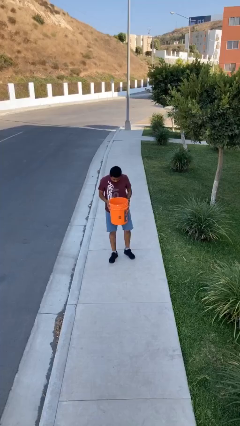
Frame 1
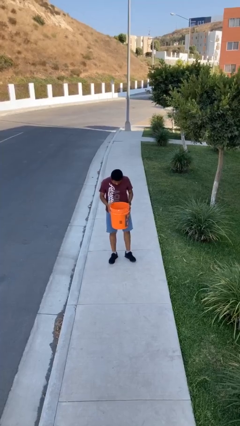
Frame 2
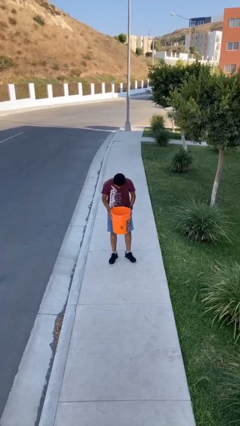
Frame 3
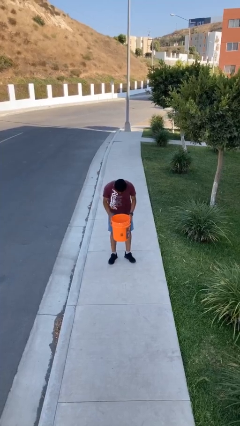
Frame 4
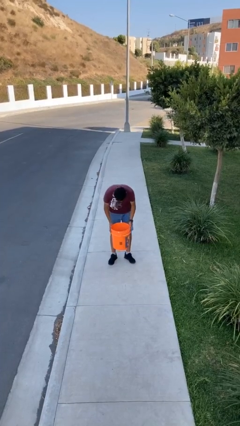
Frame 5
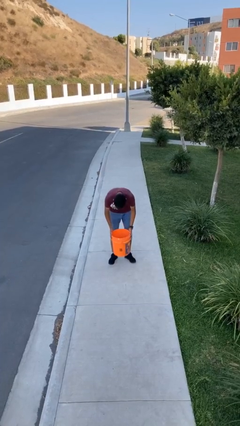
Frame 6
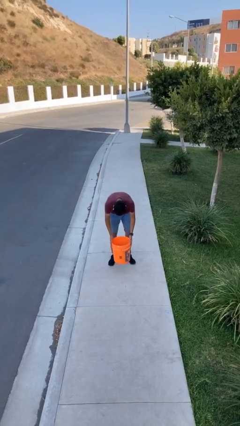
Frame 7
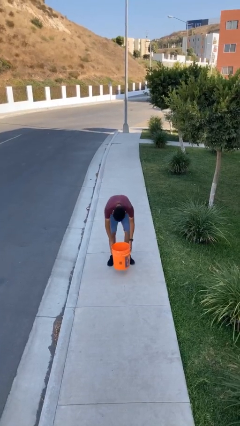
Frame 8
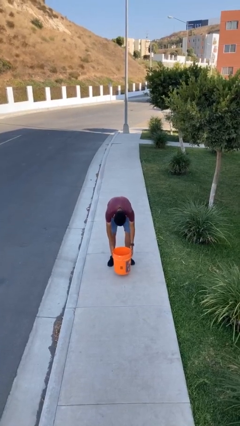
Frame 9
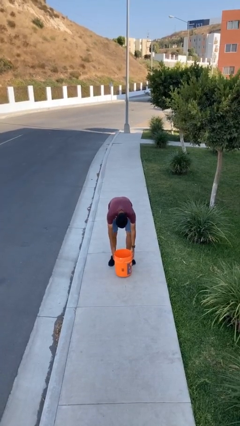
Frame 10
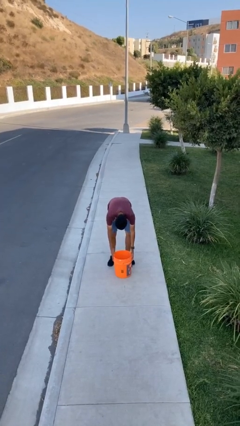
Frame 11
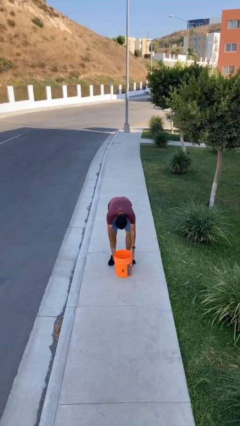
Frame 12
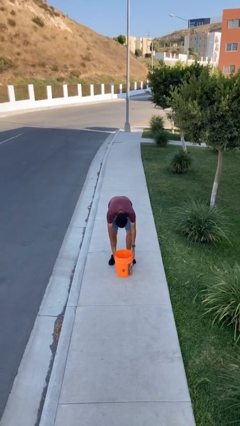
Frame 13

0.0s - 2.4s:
person puts down object on floor

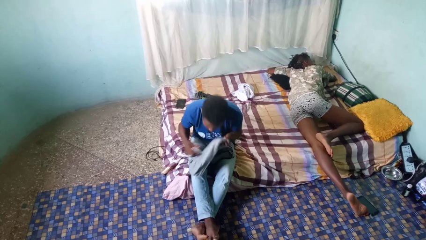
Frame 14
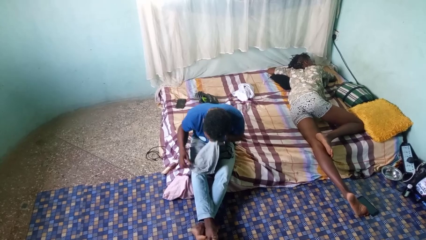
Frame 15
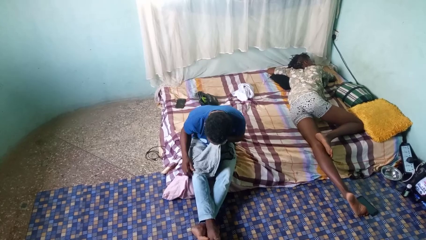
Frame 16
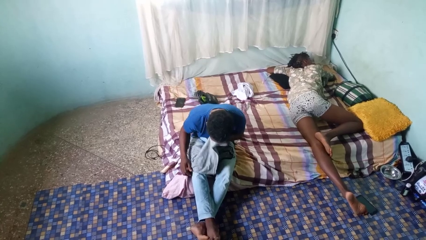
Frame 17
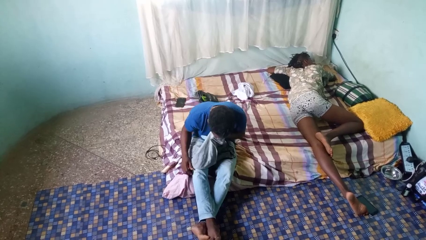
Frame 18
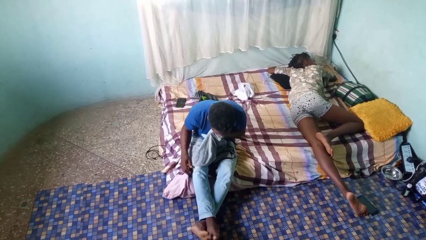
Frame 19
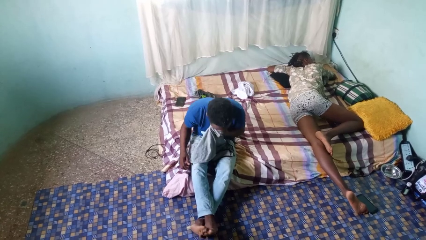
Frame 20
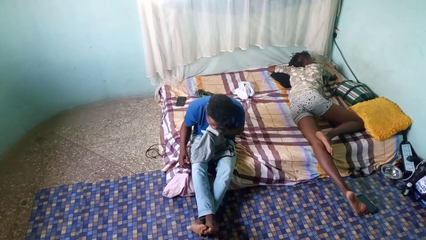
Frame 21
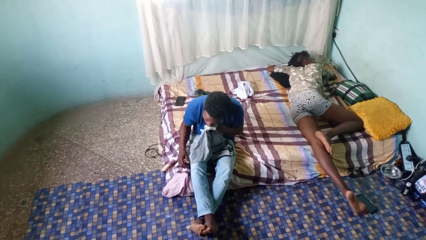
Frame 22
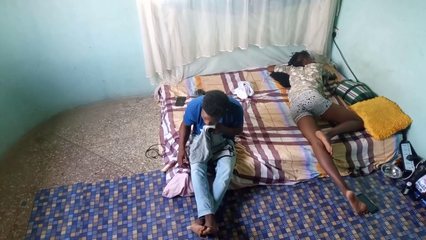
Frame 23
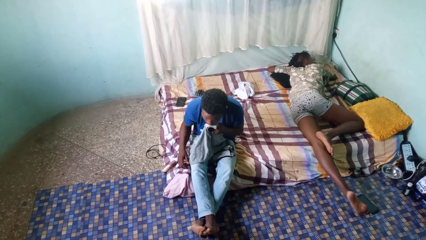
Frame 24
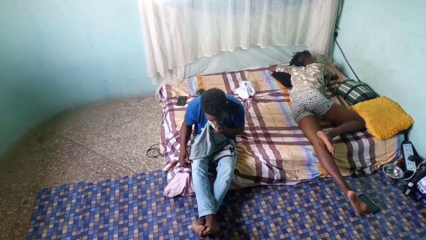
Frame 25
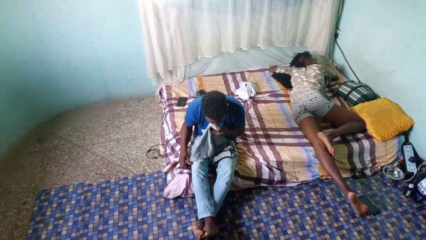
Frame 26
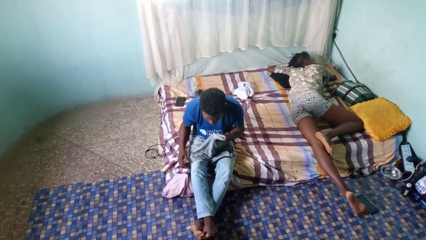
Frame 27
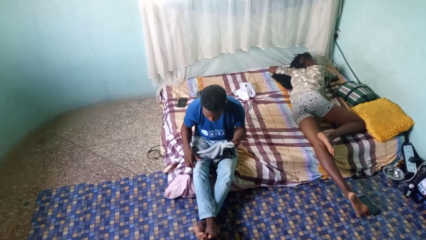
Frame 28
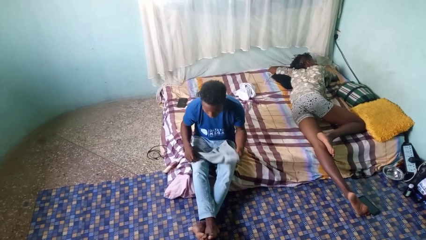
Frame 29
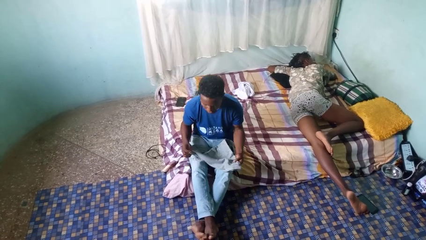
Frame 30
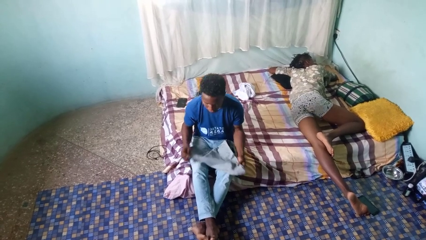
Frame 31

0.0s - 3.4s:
person wipes mouth with napkin

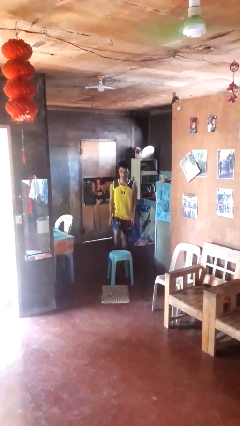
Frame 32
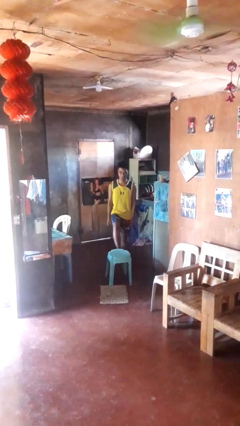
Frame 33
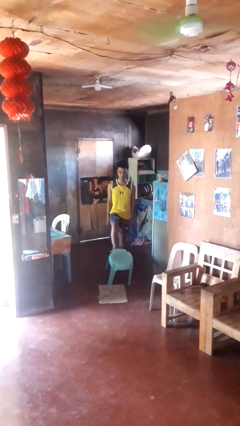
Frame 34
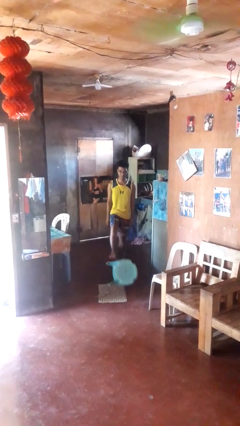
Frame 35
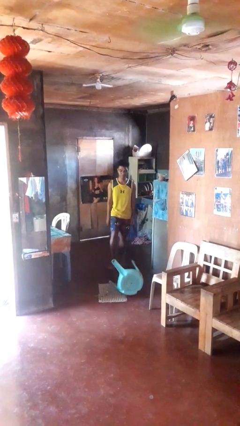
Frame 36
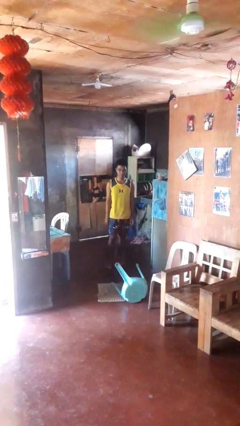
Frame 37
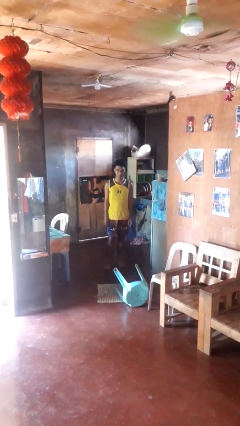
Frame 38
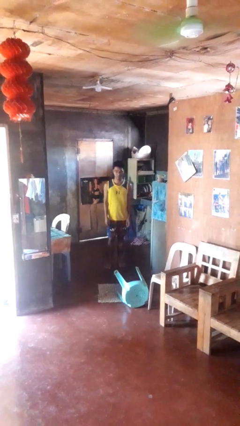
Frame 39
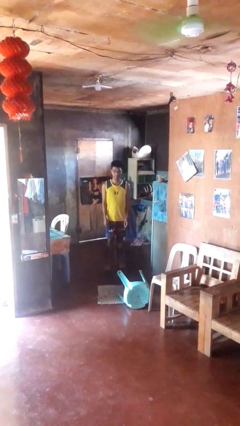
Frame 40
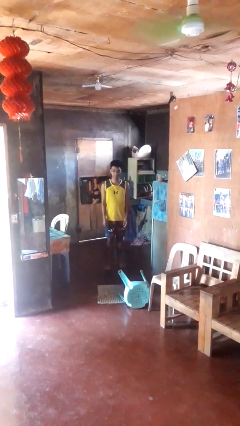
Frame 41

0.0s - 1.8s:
person knocks over furniture

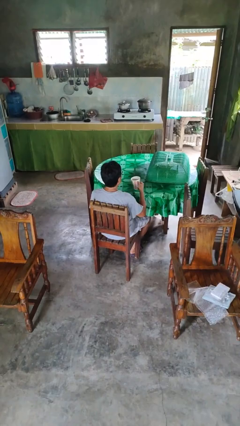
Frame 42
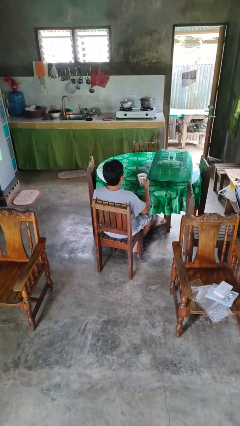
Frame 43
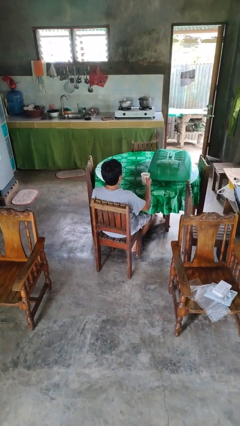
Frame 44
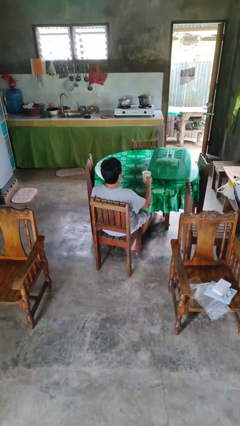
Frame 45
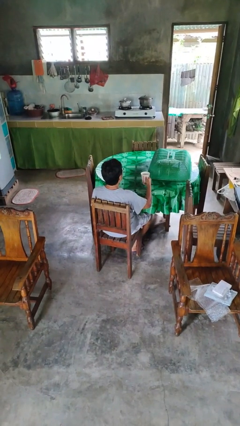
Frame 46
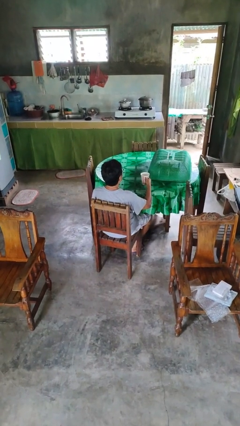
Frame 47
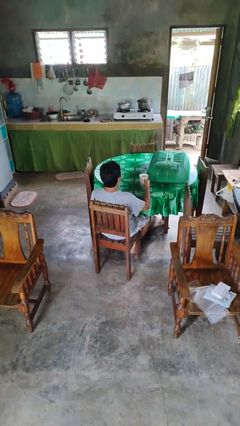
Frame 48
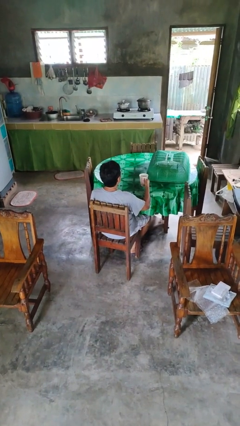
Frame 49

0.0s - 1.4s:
person puts down object on table

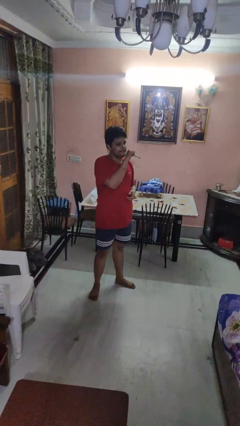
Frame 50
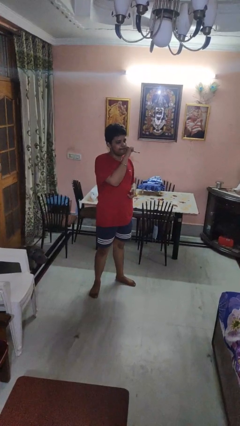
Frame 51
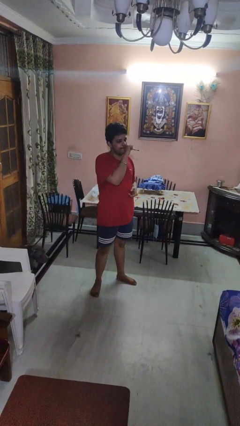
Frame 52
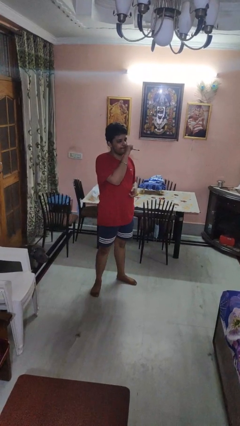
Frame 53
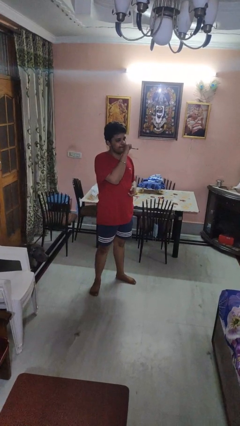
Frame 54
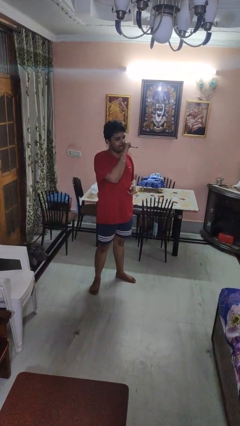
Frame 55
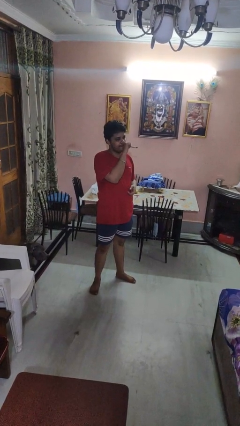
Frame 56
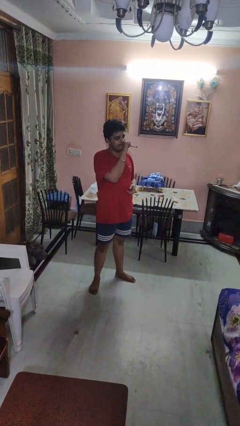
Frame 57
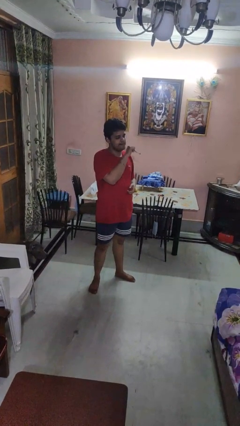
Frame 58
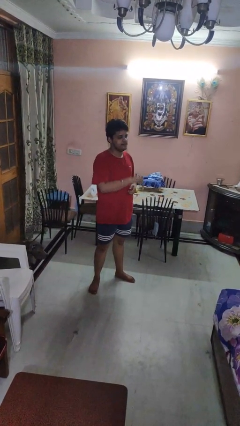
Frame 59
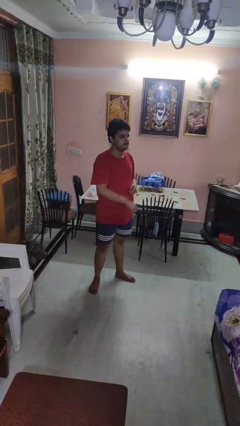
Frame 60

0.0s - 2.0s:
person vapes

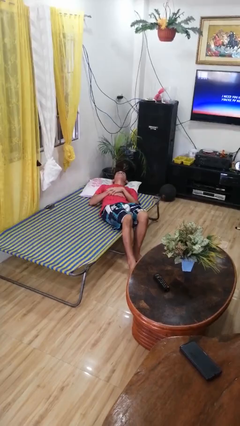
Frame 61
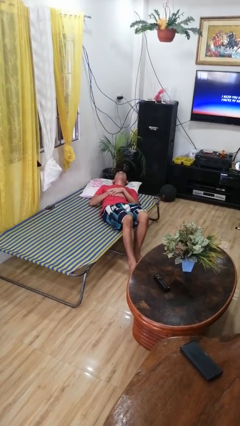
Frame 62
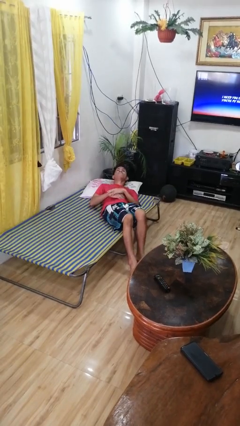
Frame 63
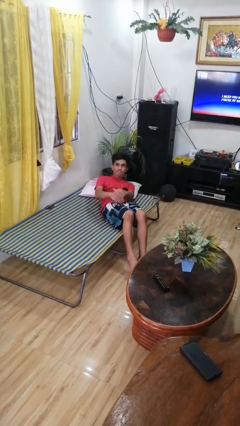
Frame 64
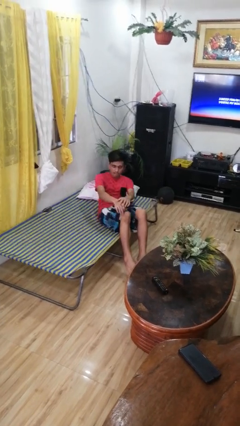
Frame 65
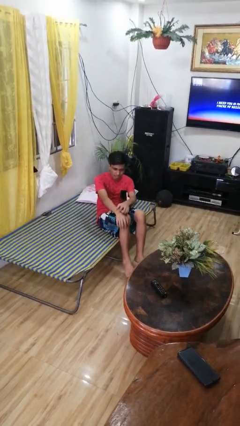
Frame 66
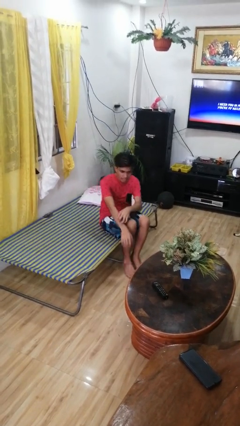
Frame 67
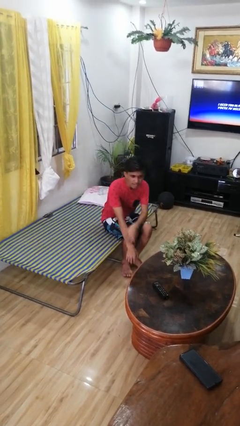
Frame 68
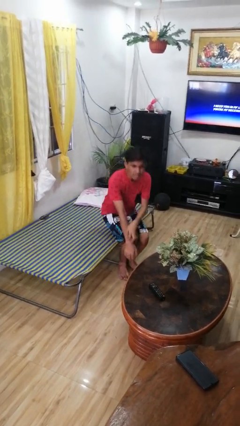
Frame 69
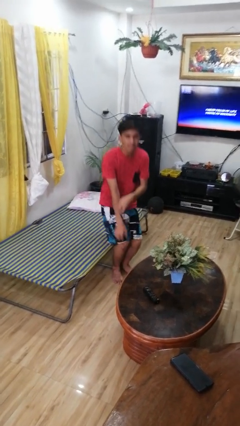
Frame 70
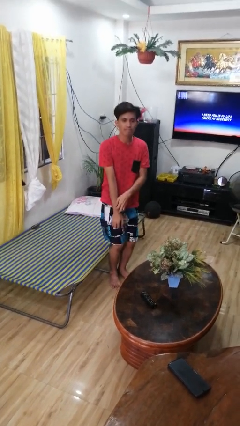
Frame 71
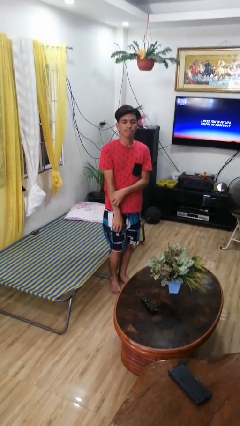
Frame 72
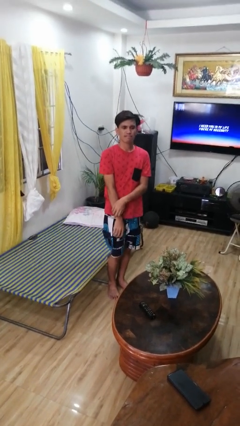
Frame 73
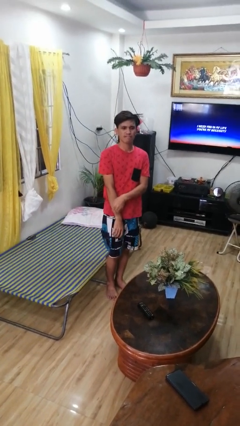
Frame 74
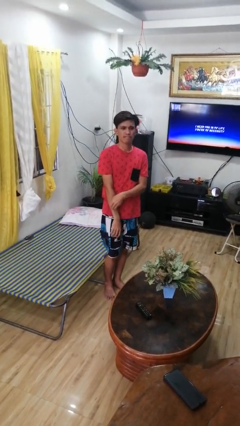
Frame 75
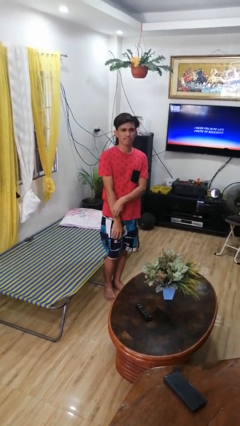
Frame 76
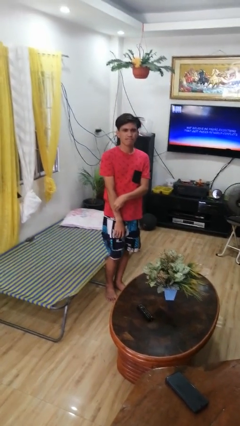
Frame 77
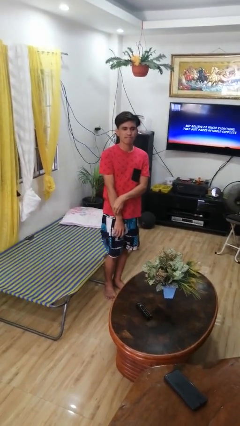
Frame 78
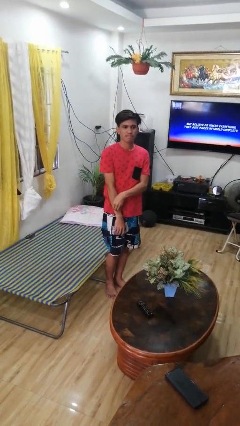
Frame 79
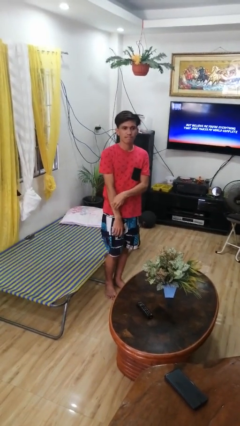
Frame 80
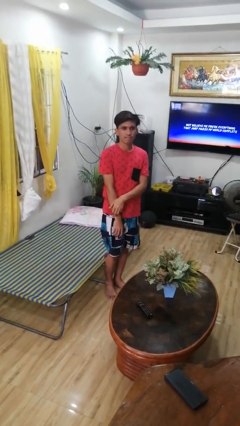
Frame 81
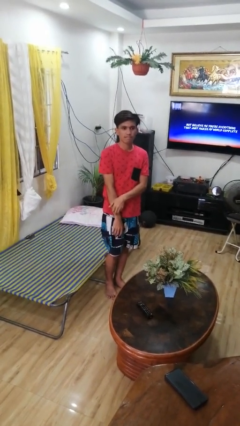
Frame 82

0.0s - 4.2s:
person stands up

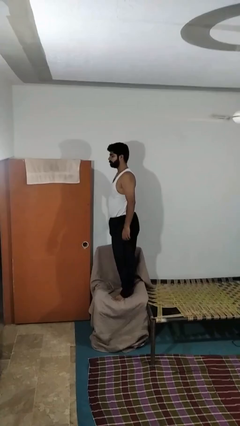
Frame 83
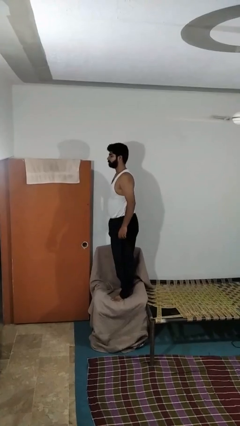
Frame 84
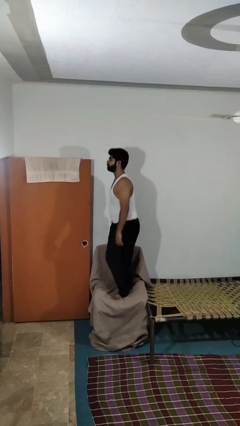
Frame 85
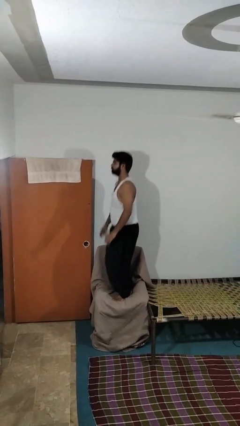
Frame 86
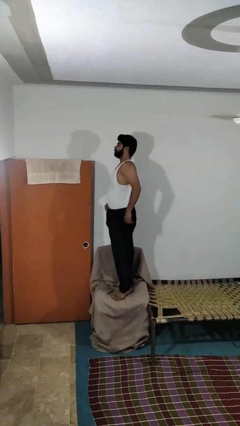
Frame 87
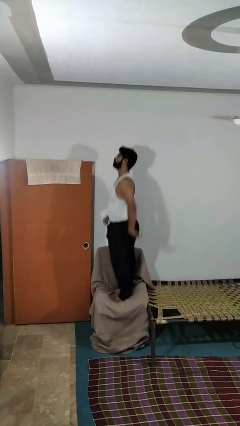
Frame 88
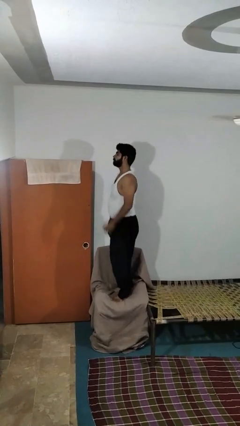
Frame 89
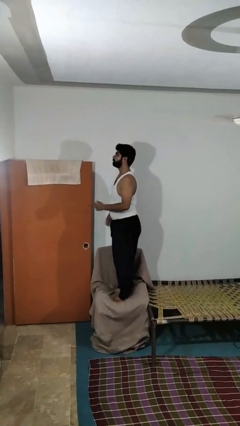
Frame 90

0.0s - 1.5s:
person jumps on couch

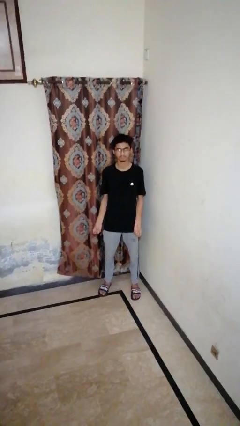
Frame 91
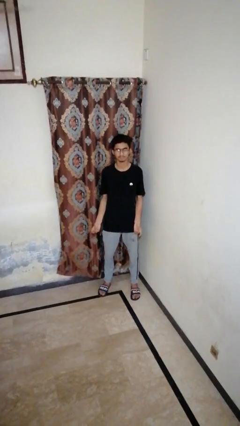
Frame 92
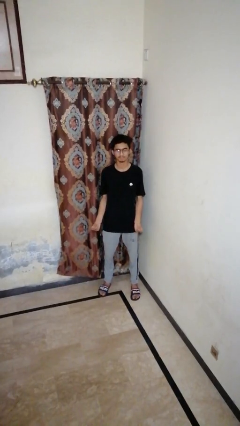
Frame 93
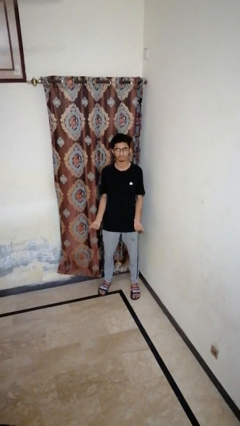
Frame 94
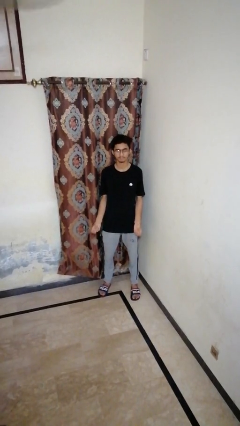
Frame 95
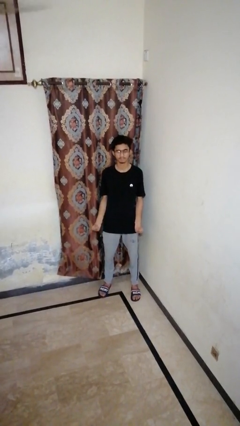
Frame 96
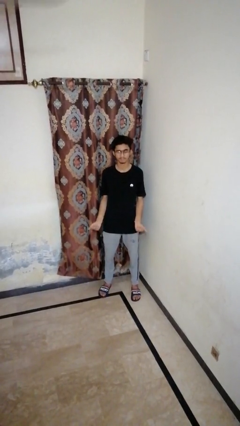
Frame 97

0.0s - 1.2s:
person snaps fingers
